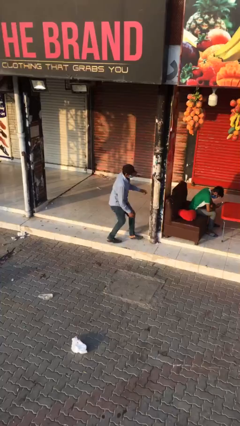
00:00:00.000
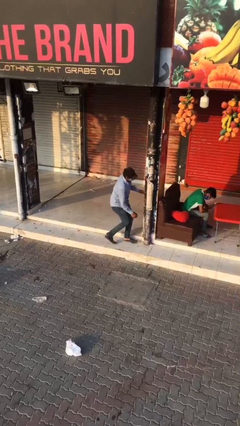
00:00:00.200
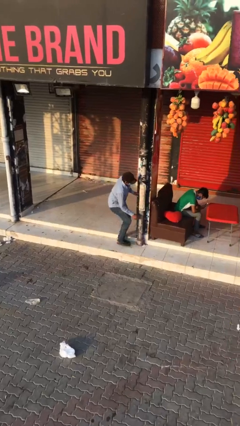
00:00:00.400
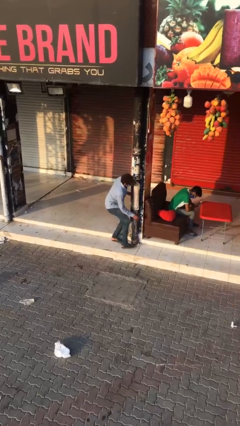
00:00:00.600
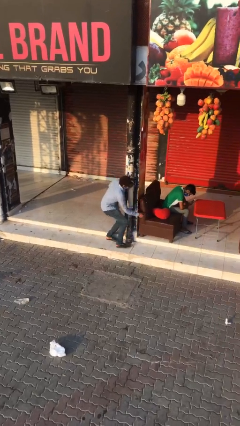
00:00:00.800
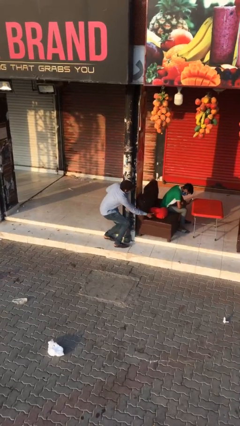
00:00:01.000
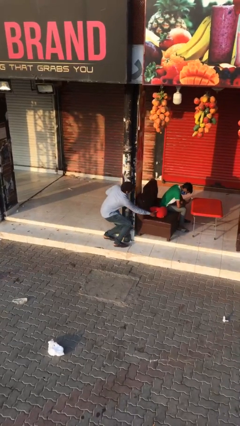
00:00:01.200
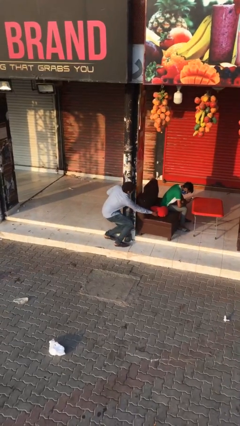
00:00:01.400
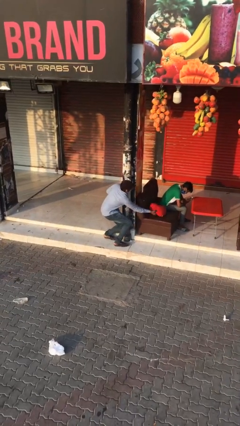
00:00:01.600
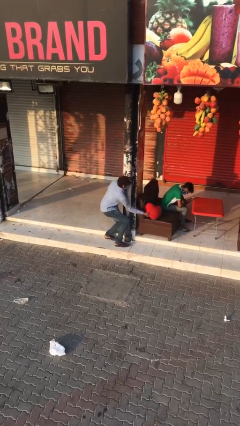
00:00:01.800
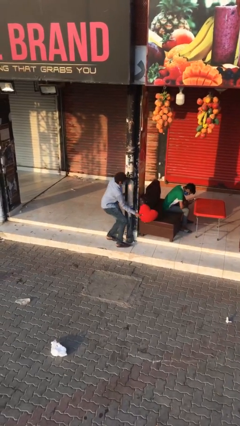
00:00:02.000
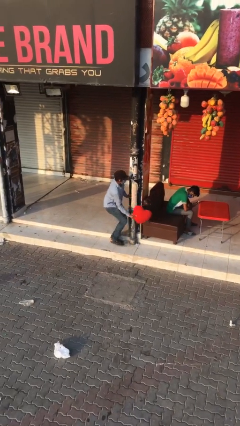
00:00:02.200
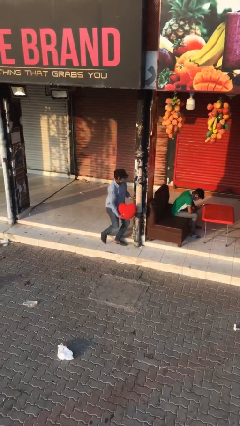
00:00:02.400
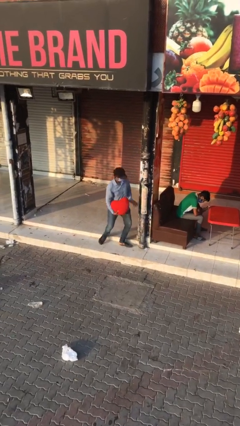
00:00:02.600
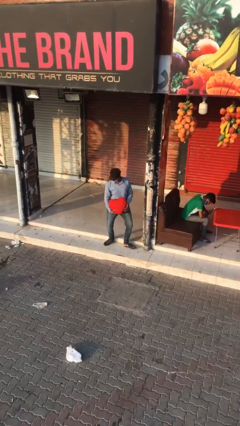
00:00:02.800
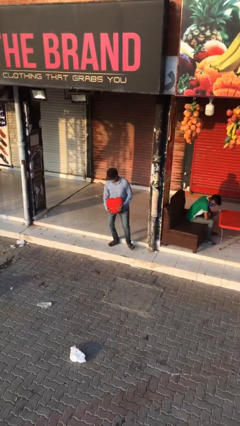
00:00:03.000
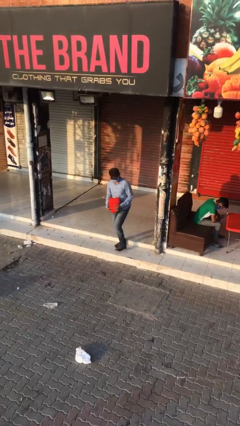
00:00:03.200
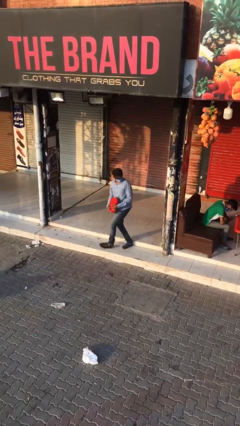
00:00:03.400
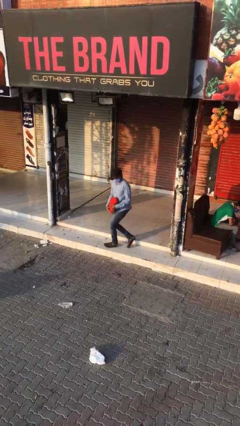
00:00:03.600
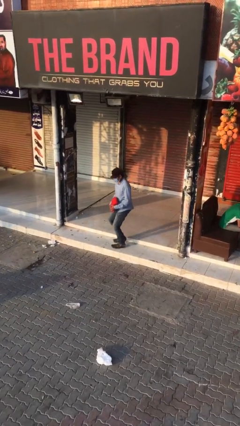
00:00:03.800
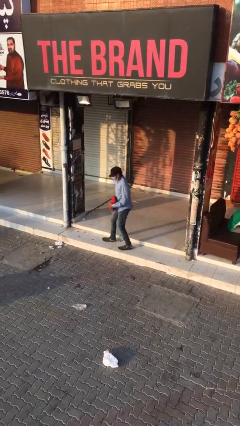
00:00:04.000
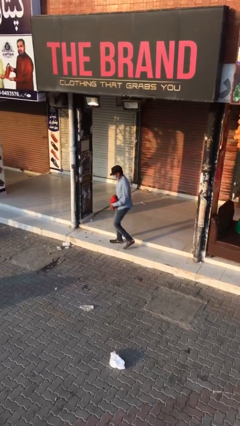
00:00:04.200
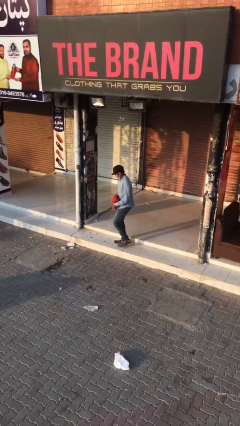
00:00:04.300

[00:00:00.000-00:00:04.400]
person steals object from person

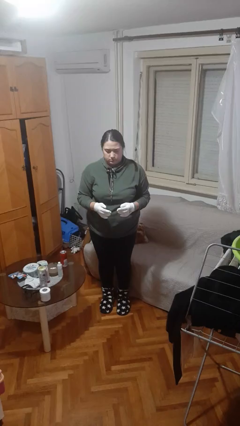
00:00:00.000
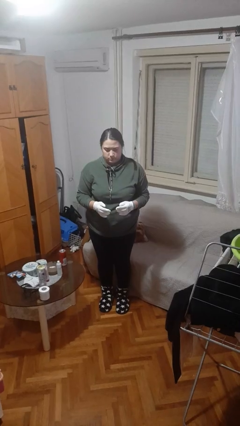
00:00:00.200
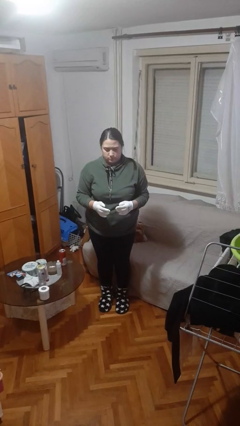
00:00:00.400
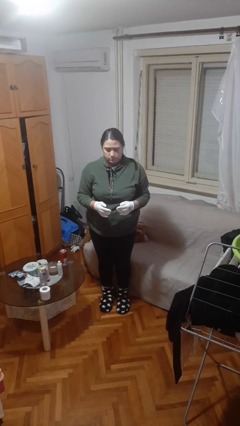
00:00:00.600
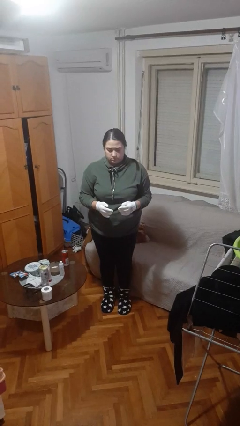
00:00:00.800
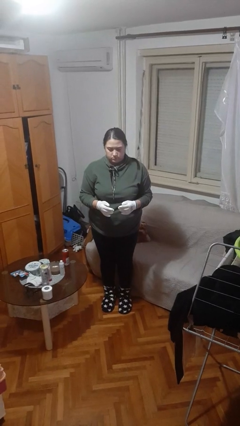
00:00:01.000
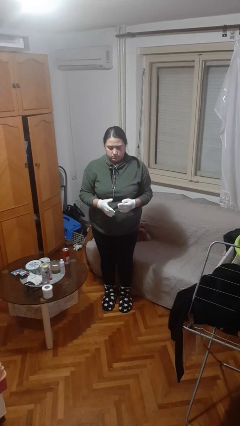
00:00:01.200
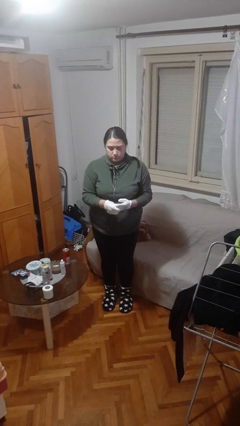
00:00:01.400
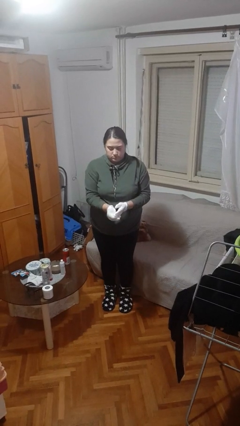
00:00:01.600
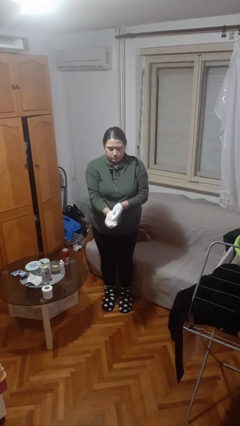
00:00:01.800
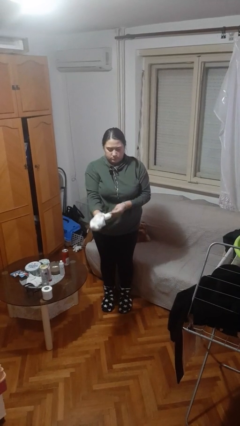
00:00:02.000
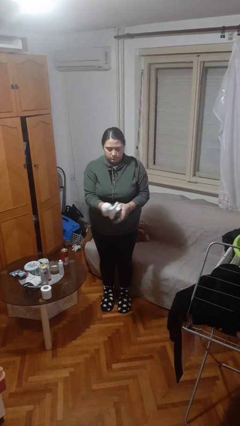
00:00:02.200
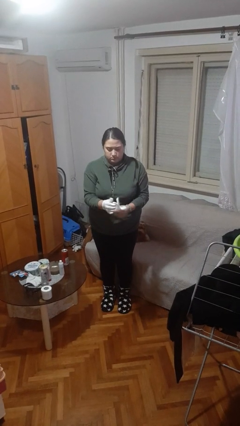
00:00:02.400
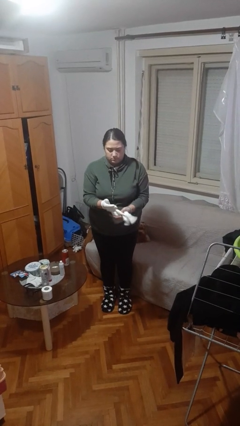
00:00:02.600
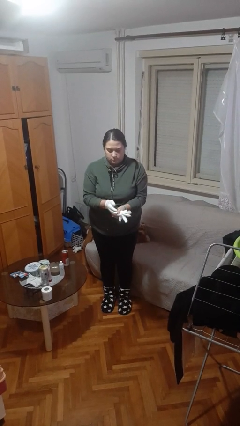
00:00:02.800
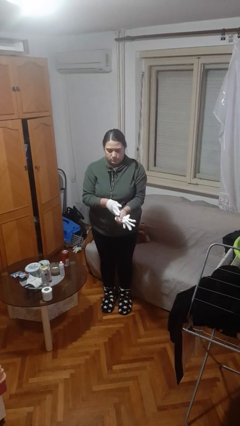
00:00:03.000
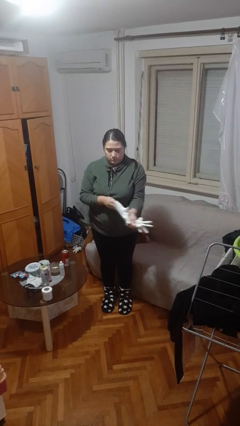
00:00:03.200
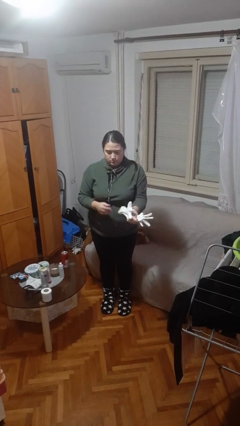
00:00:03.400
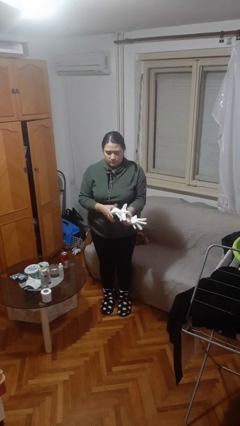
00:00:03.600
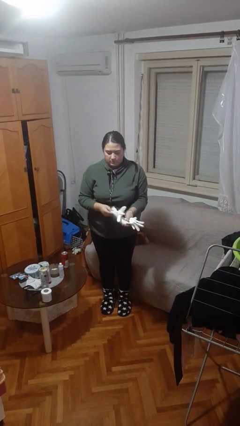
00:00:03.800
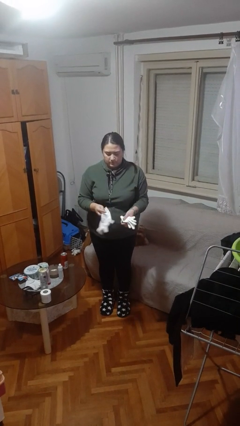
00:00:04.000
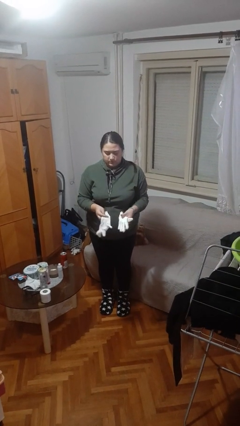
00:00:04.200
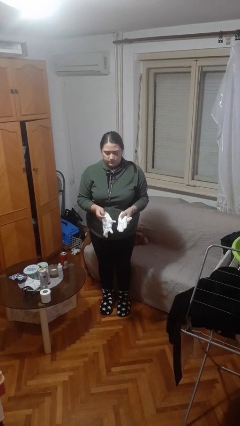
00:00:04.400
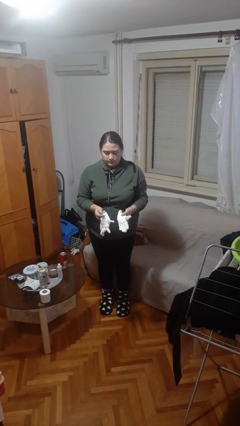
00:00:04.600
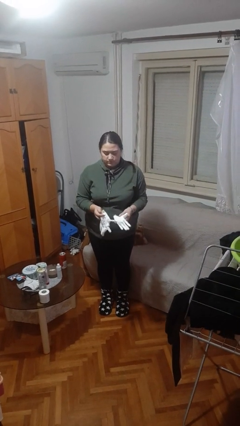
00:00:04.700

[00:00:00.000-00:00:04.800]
person takes off gloves

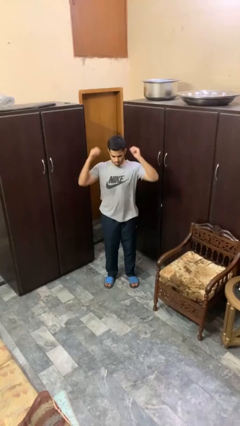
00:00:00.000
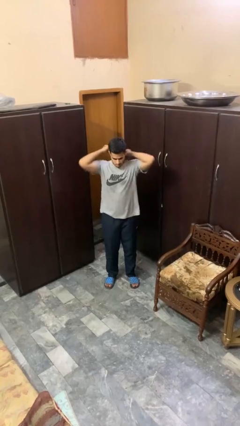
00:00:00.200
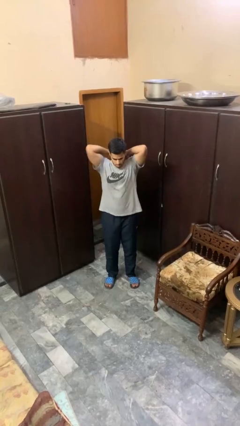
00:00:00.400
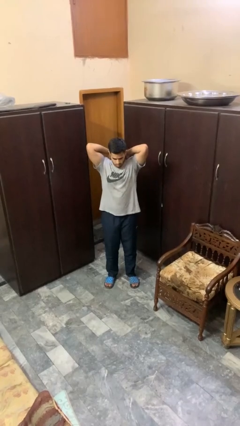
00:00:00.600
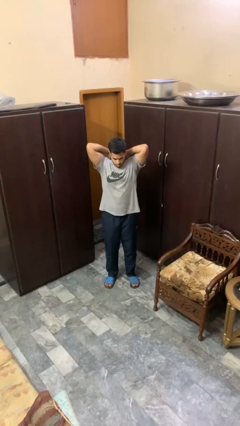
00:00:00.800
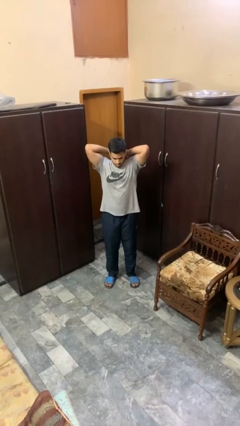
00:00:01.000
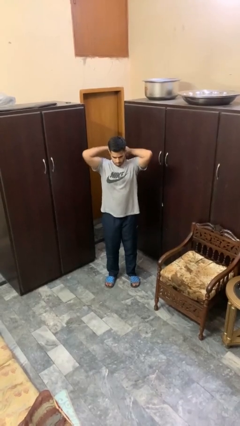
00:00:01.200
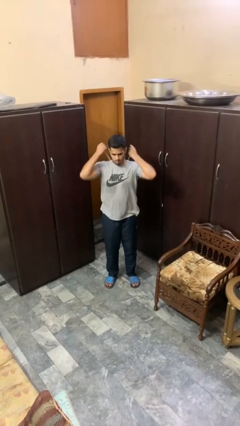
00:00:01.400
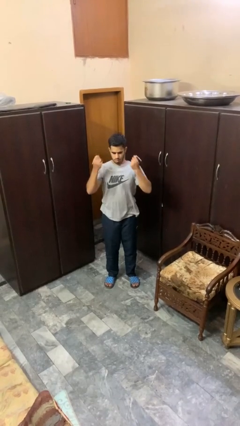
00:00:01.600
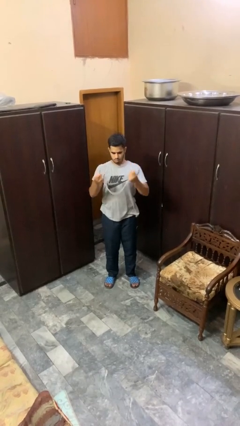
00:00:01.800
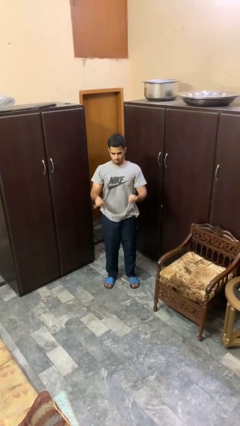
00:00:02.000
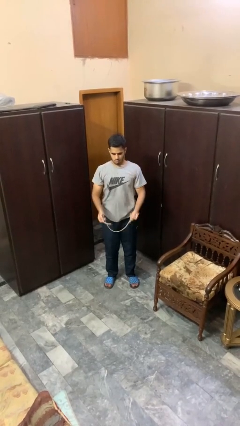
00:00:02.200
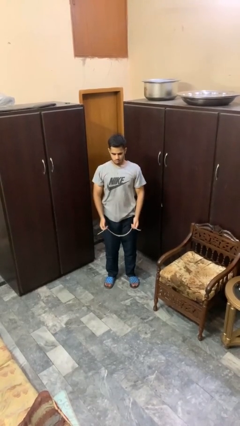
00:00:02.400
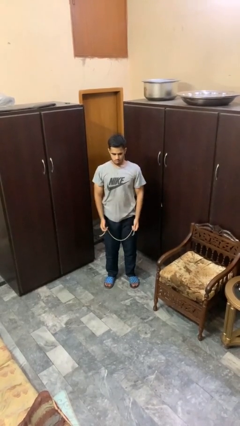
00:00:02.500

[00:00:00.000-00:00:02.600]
person takes off necklace

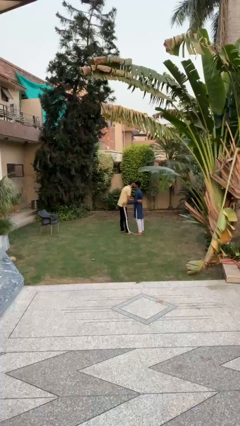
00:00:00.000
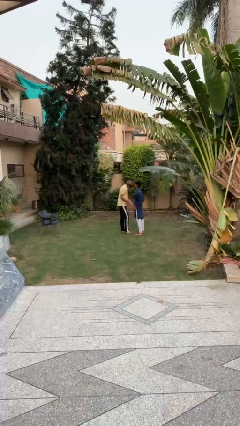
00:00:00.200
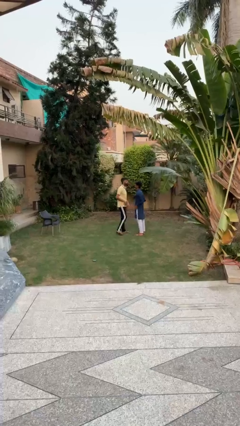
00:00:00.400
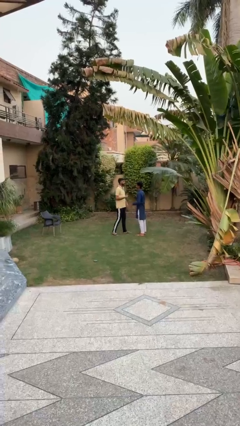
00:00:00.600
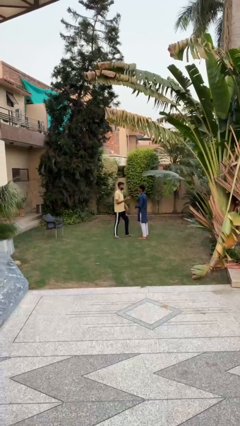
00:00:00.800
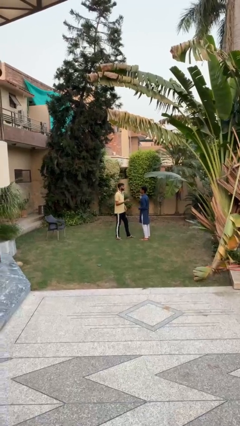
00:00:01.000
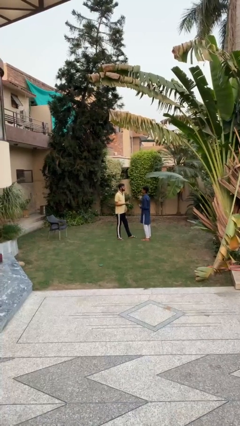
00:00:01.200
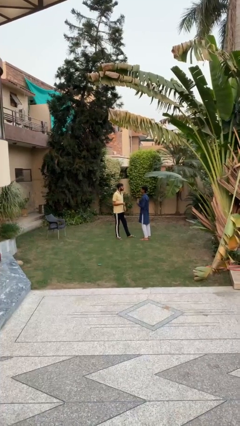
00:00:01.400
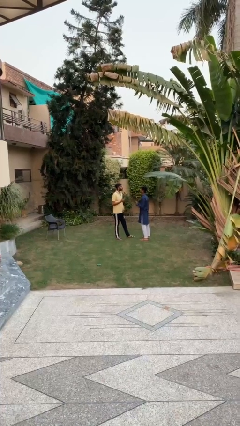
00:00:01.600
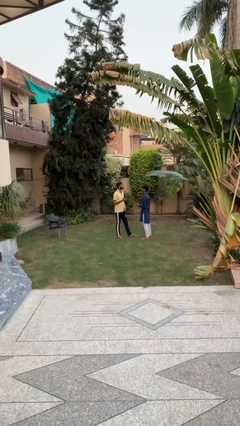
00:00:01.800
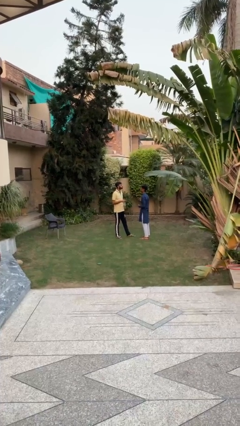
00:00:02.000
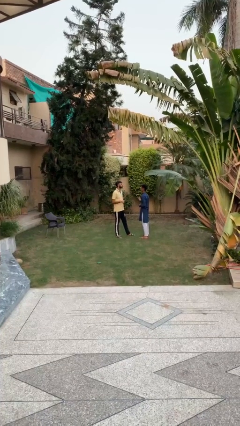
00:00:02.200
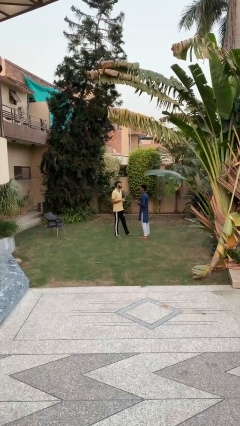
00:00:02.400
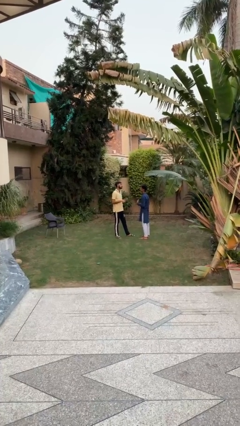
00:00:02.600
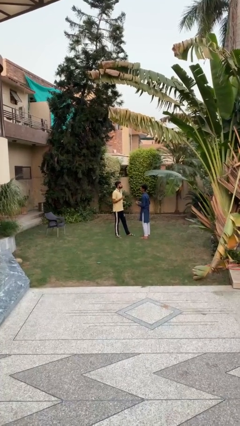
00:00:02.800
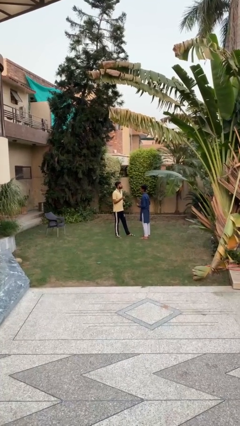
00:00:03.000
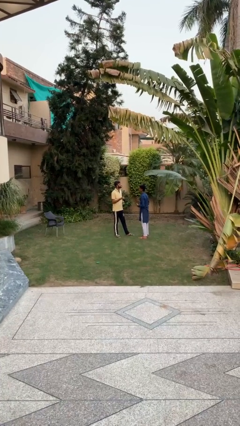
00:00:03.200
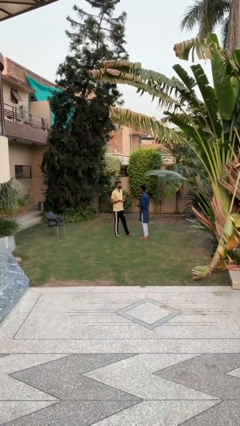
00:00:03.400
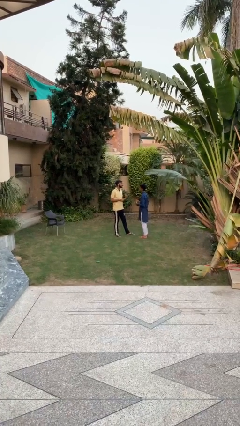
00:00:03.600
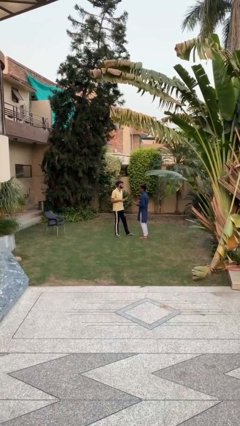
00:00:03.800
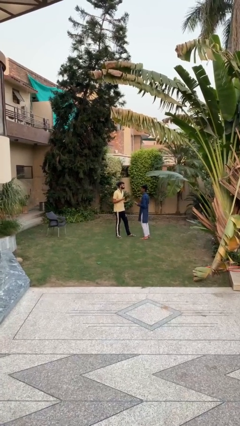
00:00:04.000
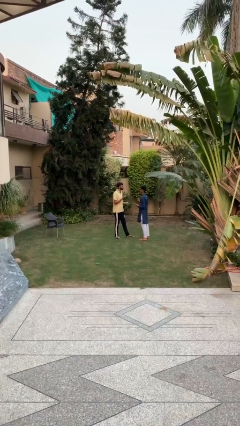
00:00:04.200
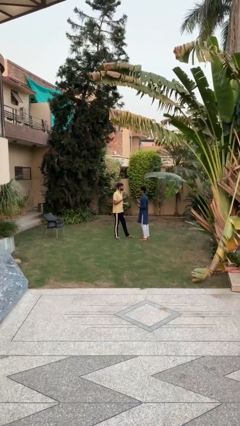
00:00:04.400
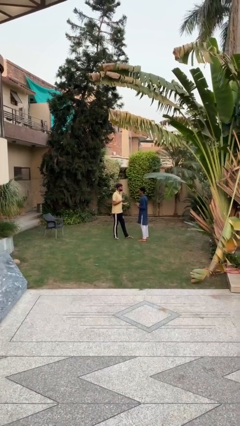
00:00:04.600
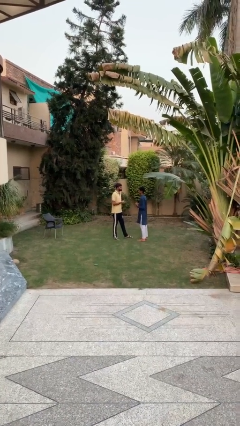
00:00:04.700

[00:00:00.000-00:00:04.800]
person talks to person

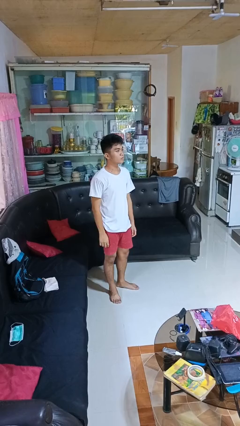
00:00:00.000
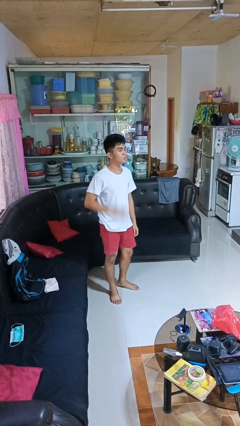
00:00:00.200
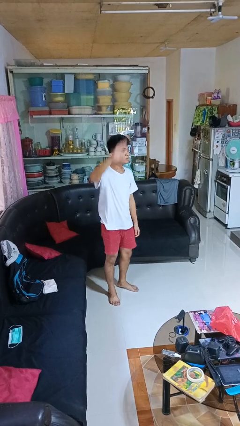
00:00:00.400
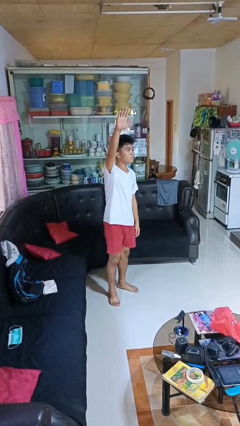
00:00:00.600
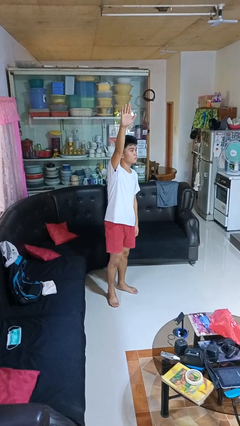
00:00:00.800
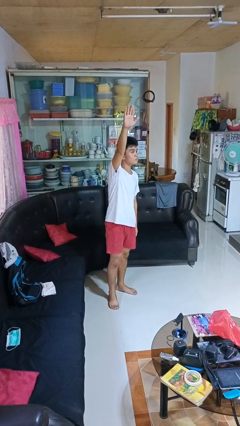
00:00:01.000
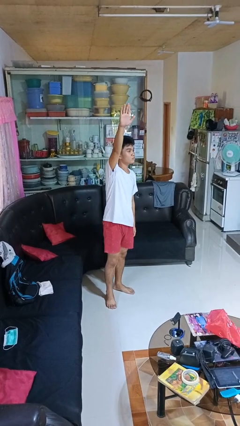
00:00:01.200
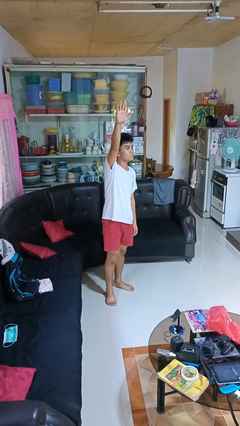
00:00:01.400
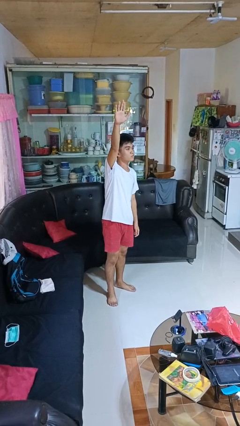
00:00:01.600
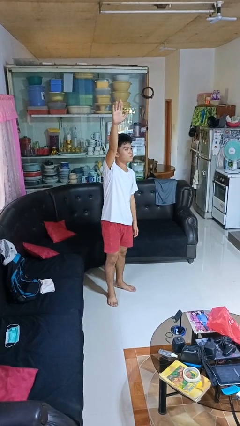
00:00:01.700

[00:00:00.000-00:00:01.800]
person gestures raise hand
